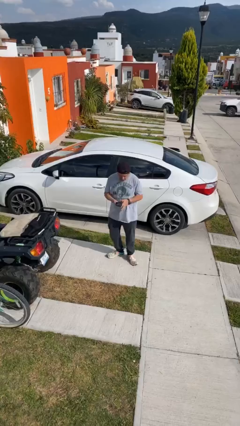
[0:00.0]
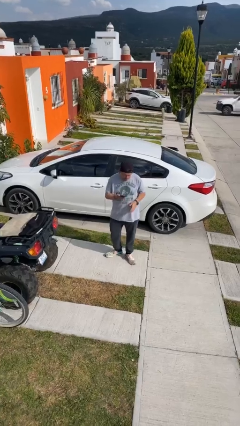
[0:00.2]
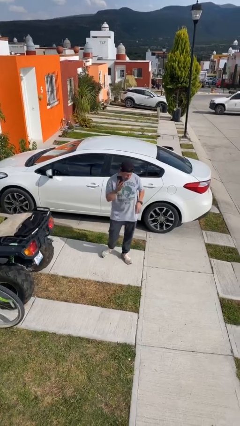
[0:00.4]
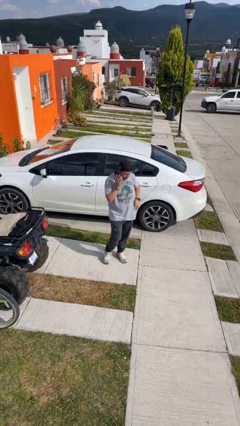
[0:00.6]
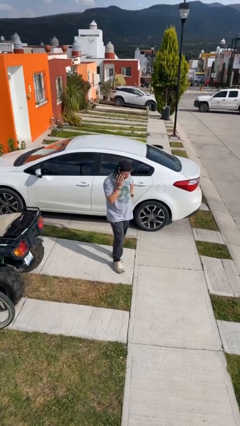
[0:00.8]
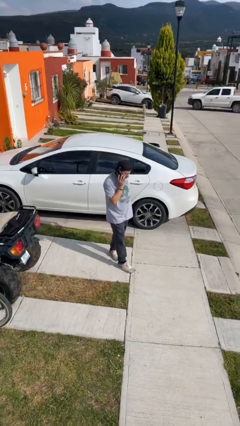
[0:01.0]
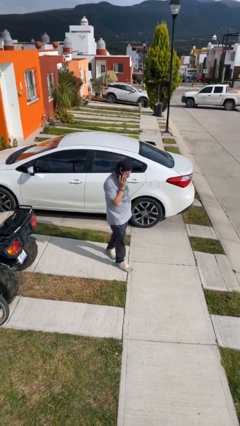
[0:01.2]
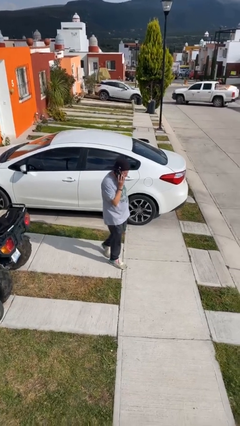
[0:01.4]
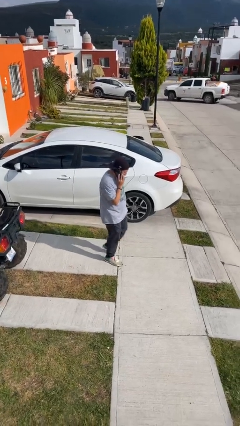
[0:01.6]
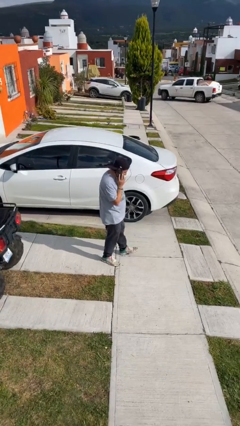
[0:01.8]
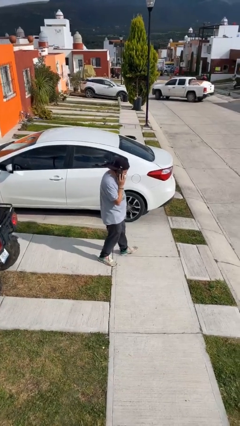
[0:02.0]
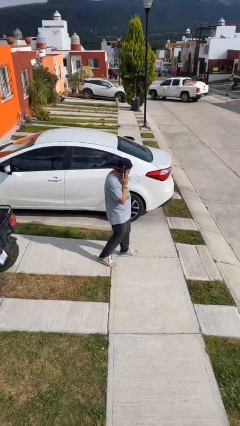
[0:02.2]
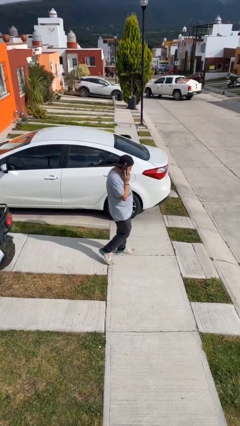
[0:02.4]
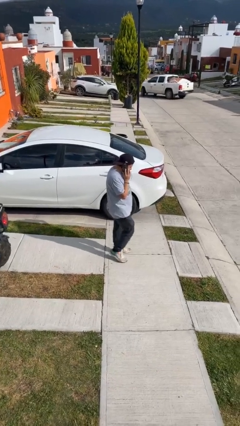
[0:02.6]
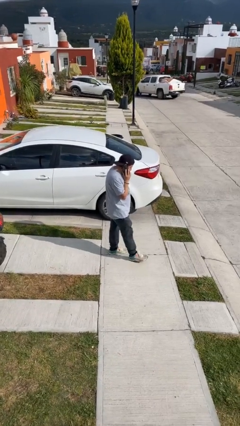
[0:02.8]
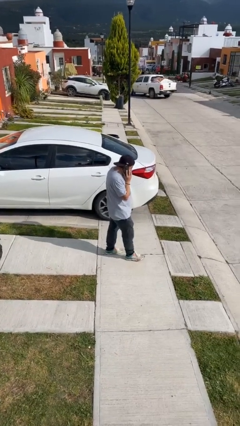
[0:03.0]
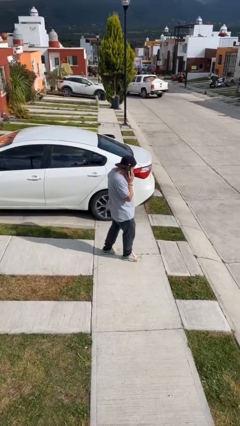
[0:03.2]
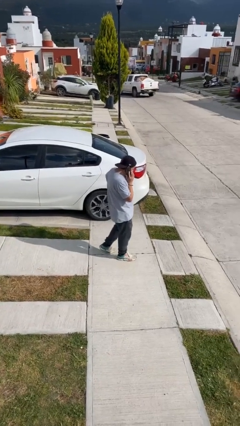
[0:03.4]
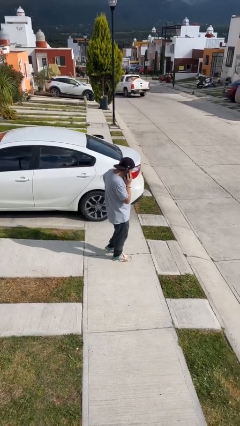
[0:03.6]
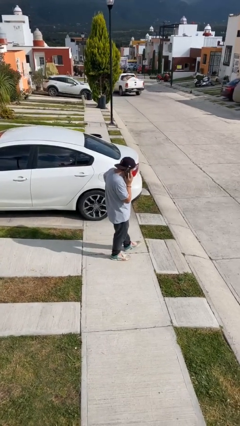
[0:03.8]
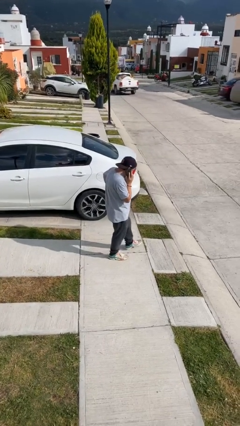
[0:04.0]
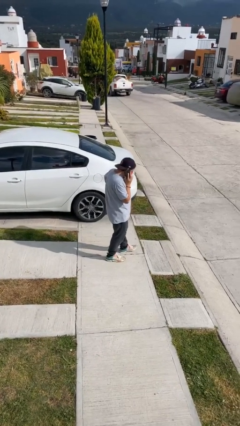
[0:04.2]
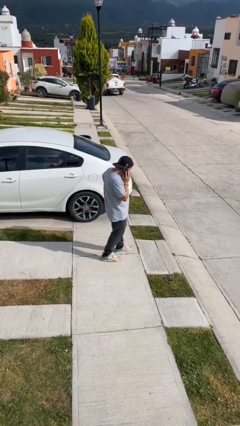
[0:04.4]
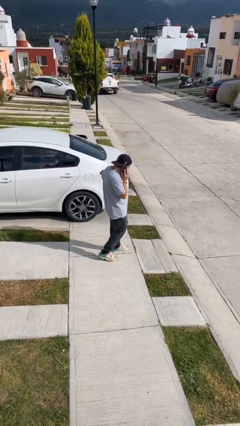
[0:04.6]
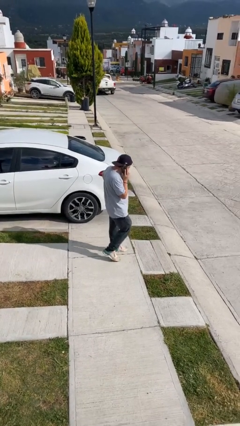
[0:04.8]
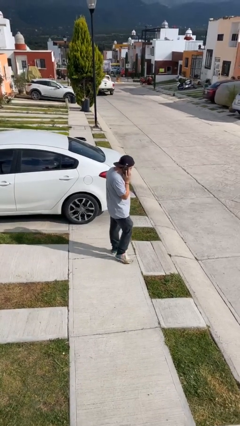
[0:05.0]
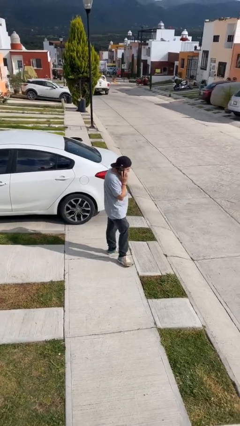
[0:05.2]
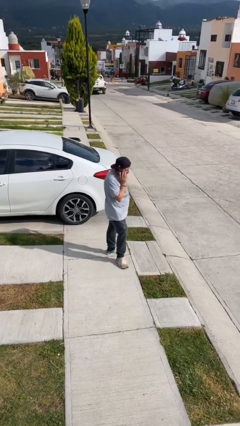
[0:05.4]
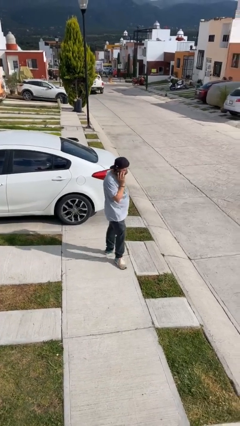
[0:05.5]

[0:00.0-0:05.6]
person talks on phone

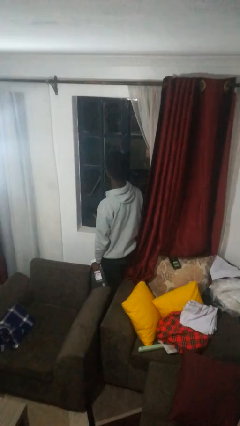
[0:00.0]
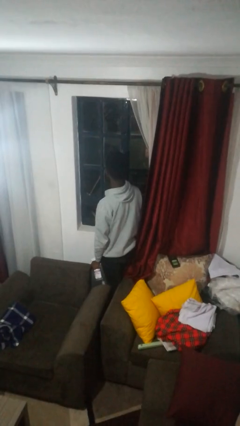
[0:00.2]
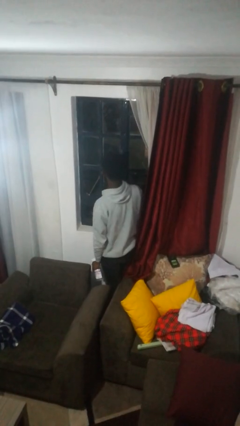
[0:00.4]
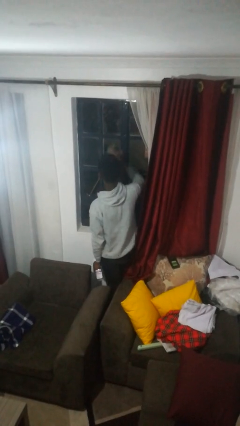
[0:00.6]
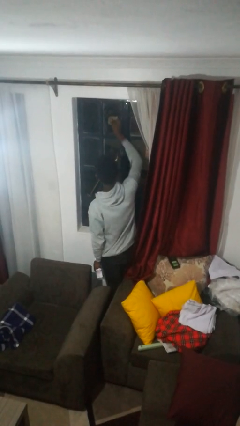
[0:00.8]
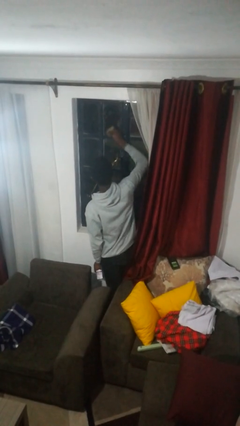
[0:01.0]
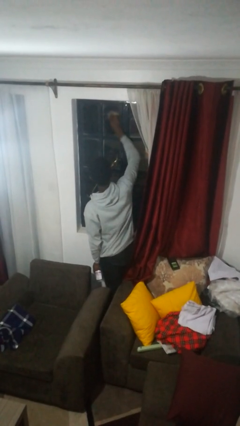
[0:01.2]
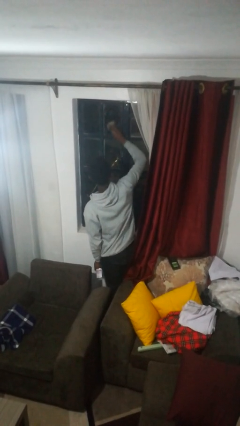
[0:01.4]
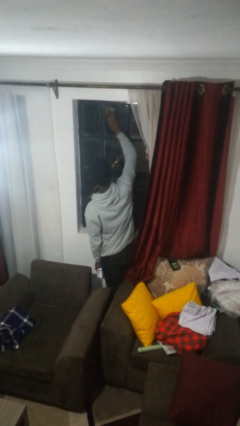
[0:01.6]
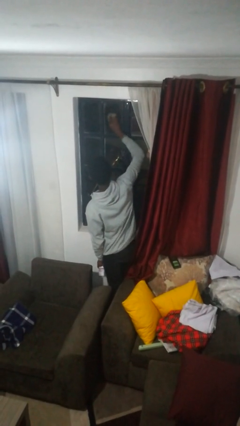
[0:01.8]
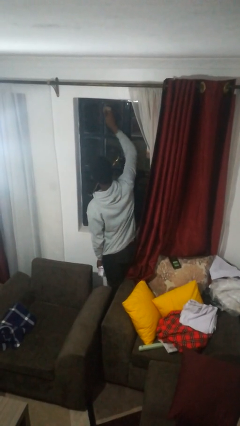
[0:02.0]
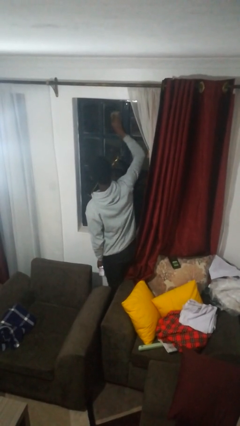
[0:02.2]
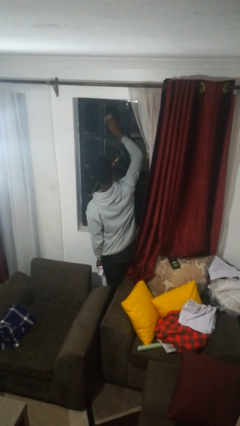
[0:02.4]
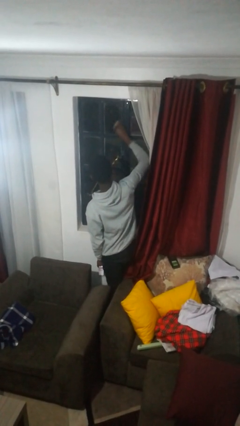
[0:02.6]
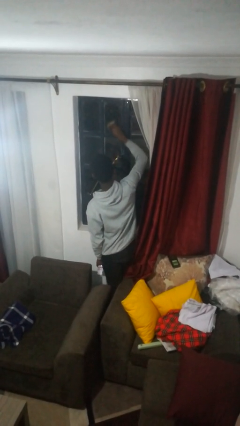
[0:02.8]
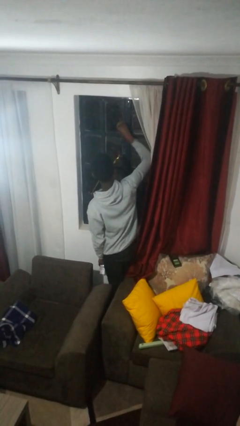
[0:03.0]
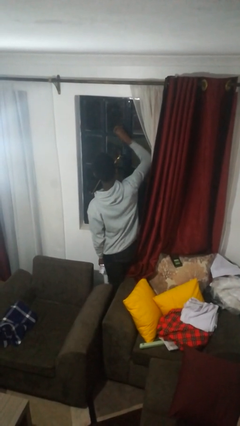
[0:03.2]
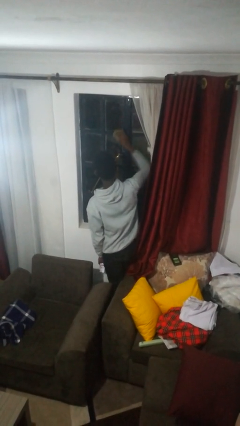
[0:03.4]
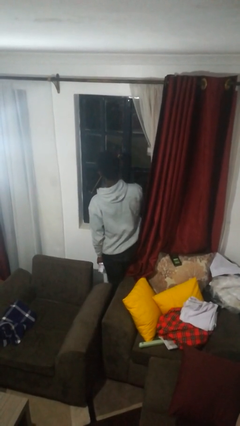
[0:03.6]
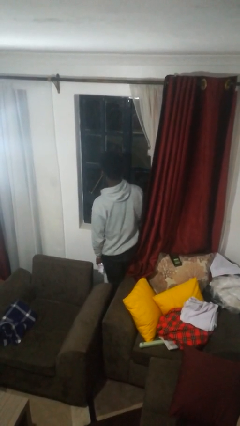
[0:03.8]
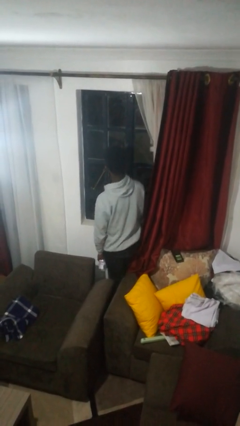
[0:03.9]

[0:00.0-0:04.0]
person washes window

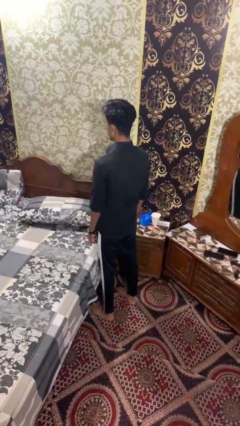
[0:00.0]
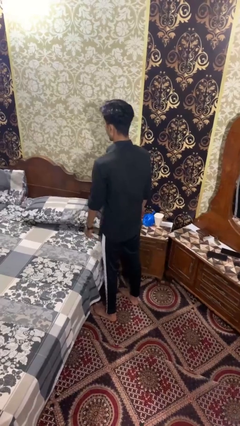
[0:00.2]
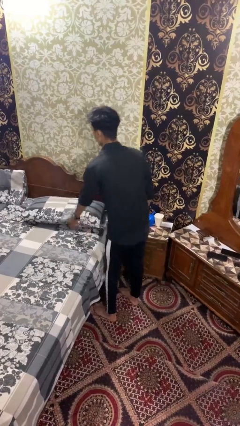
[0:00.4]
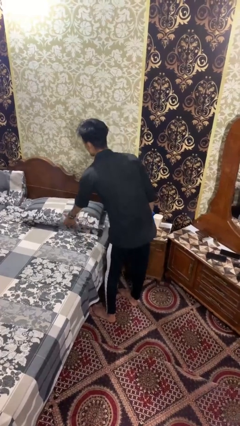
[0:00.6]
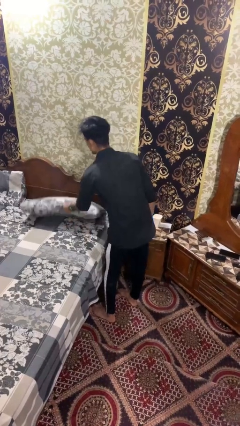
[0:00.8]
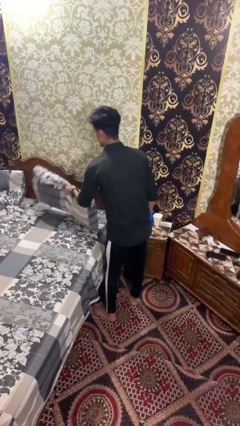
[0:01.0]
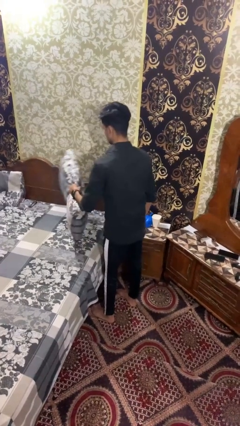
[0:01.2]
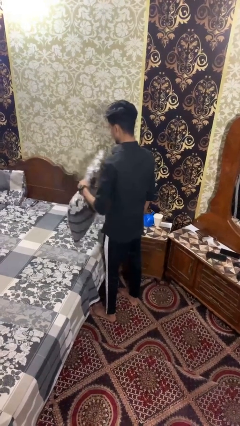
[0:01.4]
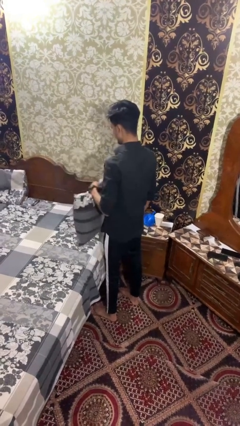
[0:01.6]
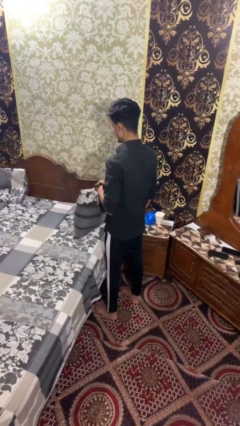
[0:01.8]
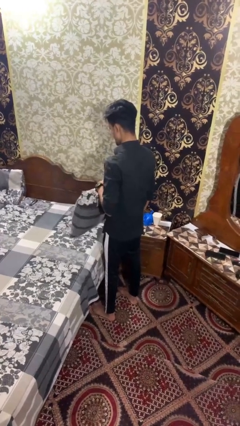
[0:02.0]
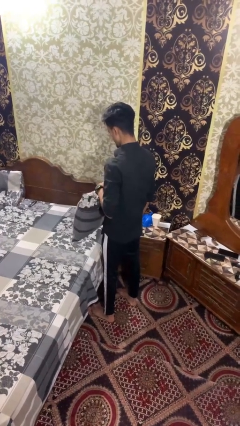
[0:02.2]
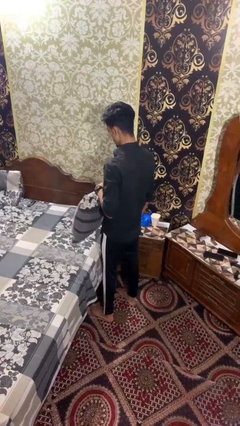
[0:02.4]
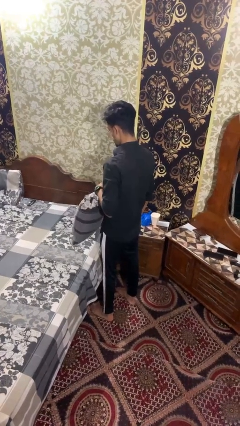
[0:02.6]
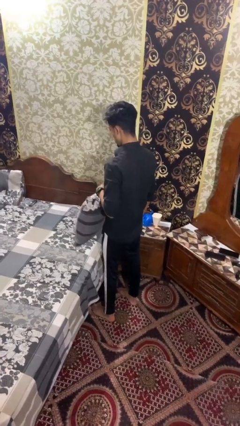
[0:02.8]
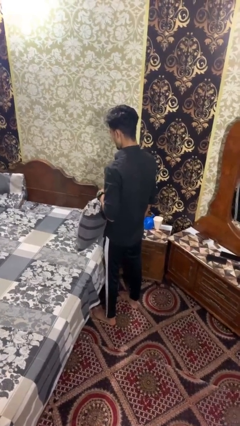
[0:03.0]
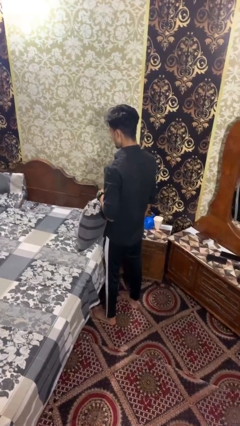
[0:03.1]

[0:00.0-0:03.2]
person picks up object from bed

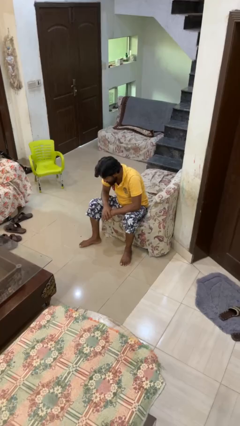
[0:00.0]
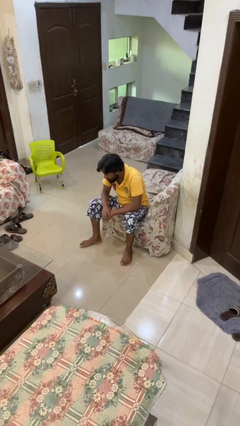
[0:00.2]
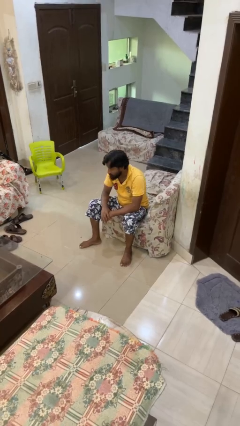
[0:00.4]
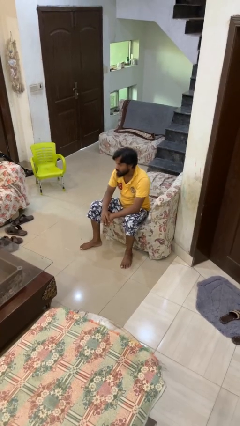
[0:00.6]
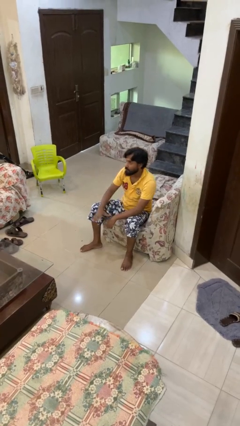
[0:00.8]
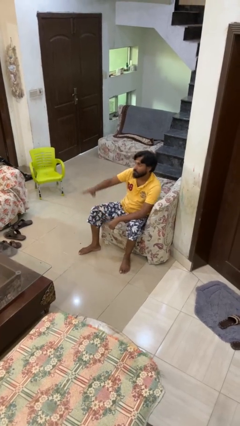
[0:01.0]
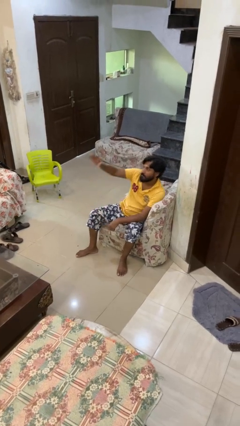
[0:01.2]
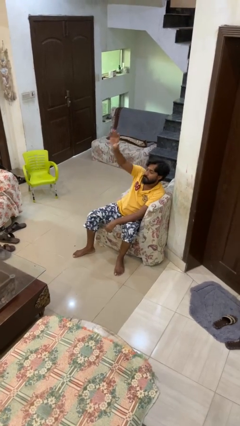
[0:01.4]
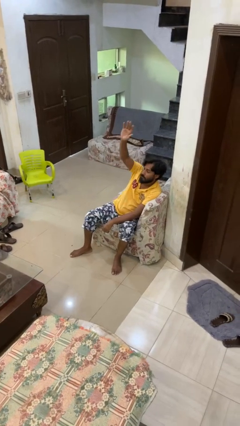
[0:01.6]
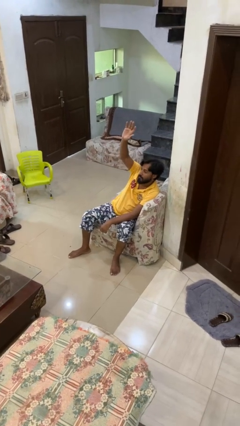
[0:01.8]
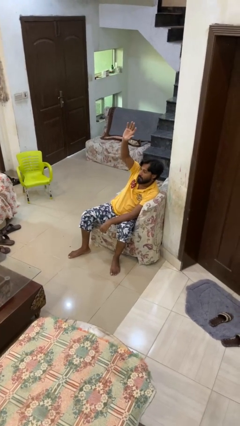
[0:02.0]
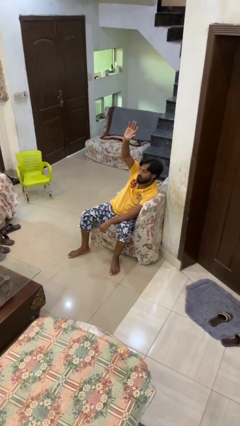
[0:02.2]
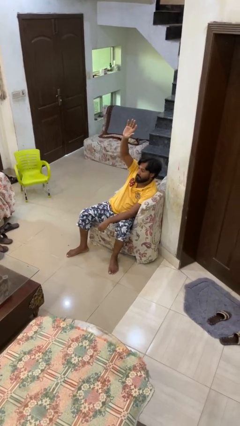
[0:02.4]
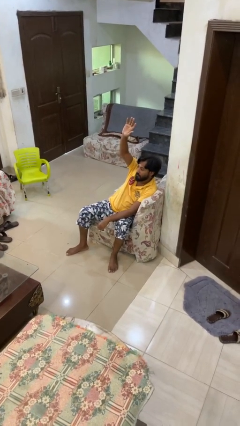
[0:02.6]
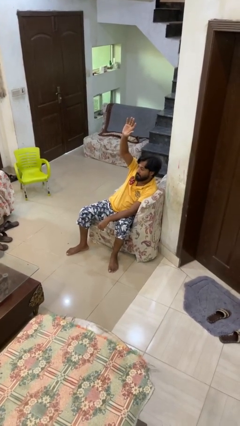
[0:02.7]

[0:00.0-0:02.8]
person gestures raise hand

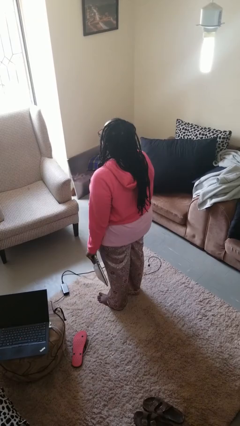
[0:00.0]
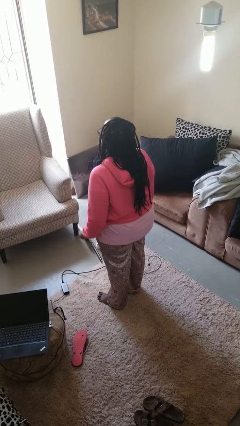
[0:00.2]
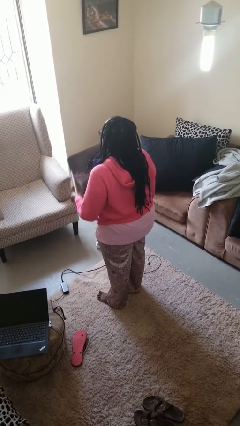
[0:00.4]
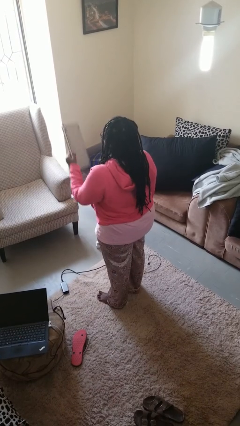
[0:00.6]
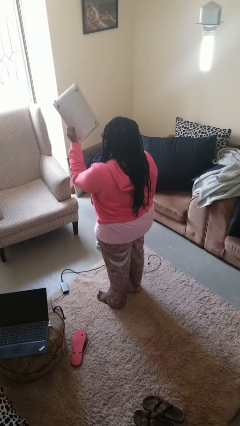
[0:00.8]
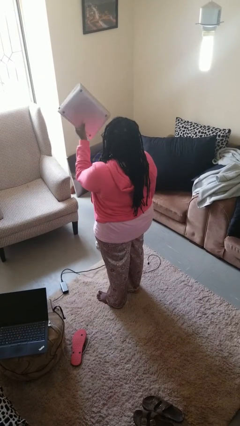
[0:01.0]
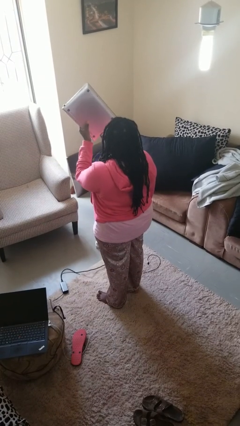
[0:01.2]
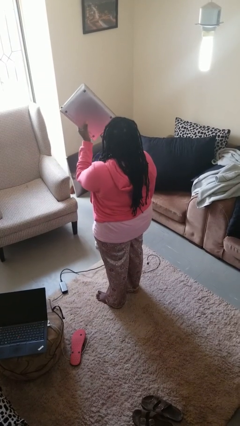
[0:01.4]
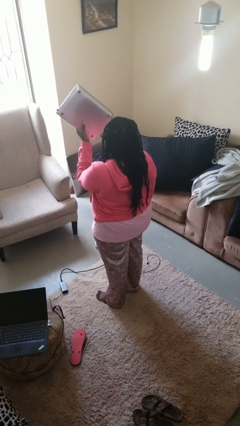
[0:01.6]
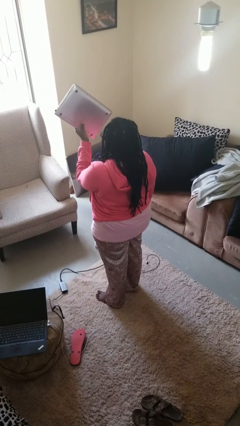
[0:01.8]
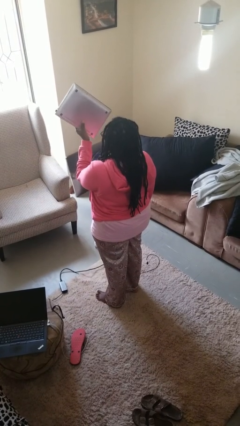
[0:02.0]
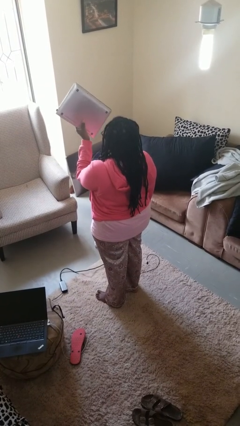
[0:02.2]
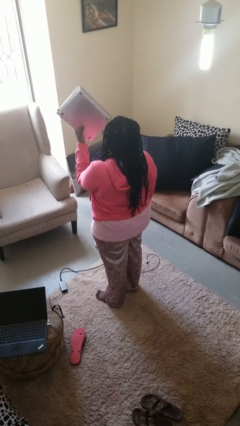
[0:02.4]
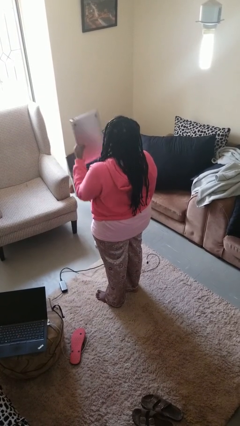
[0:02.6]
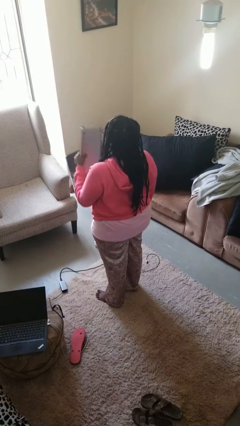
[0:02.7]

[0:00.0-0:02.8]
person holds object above head
